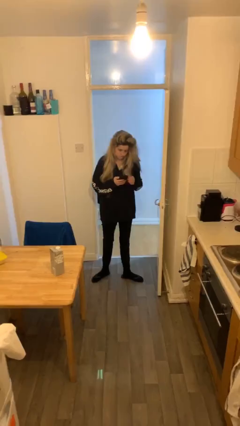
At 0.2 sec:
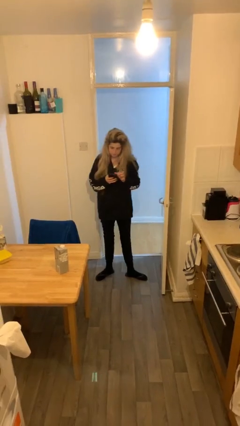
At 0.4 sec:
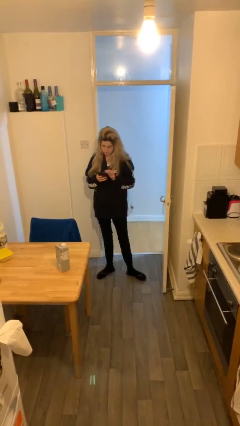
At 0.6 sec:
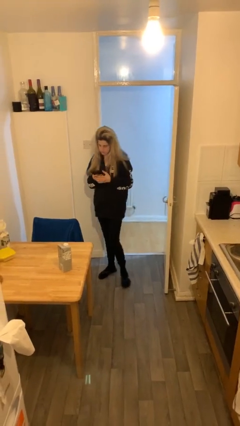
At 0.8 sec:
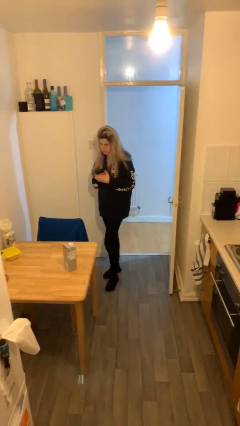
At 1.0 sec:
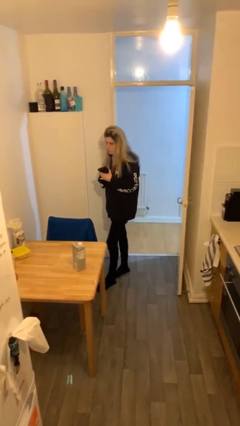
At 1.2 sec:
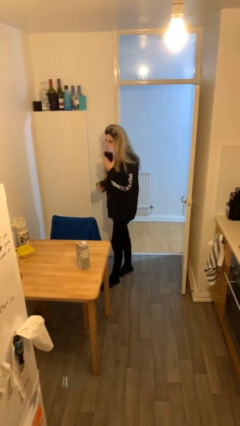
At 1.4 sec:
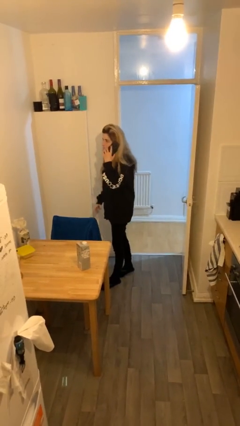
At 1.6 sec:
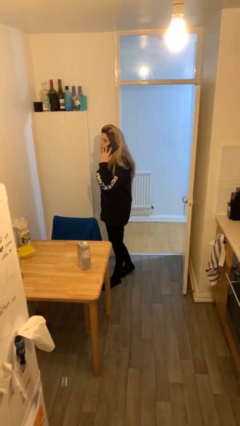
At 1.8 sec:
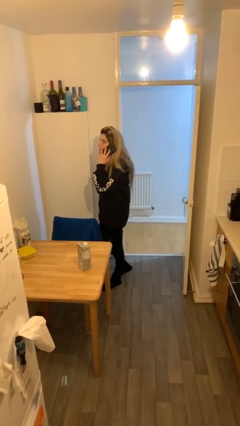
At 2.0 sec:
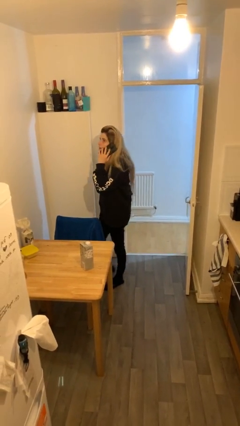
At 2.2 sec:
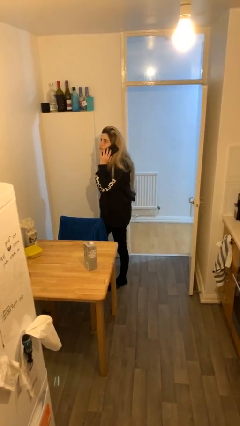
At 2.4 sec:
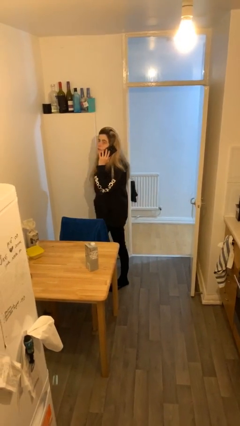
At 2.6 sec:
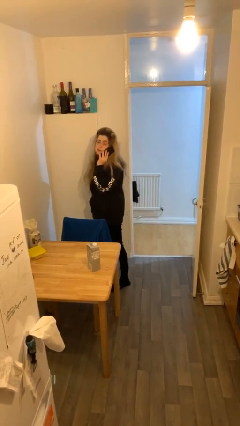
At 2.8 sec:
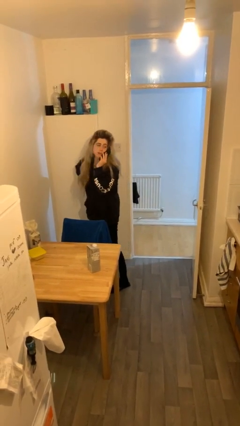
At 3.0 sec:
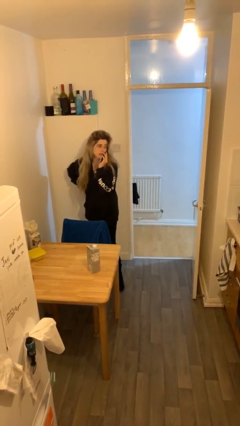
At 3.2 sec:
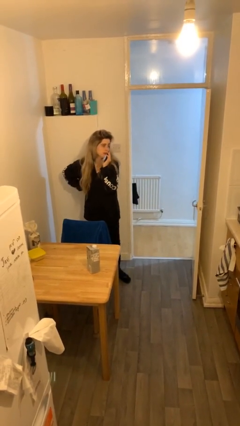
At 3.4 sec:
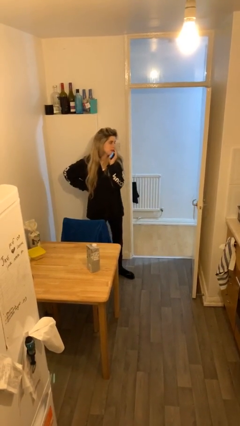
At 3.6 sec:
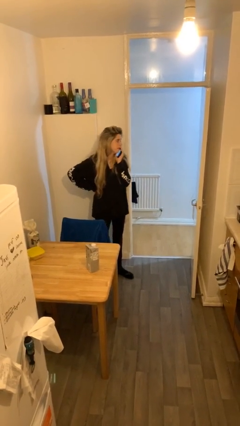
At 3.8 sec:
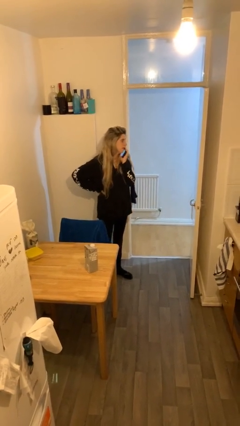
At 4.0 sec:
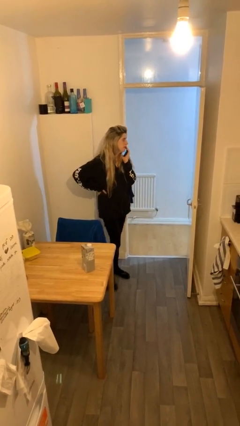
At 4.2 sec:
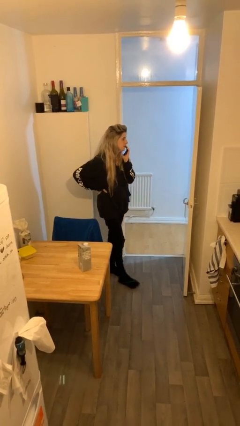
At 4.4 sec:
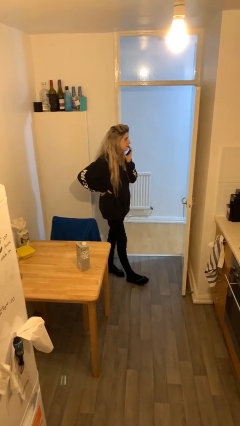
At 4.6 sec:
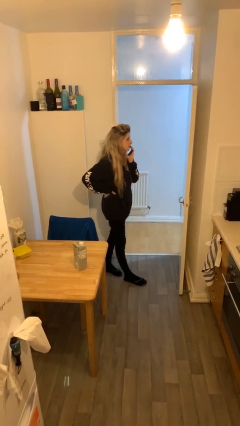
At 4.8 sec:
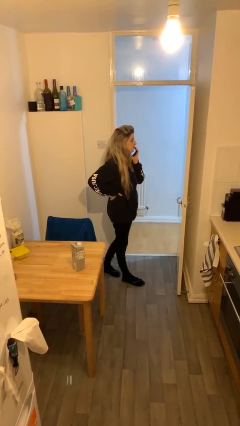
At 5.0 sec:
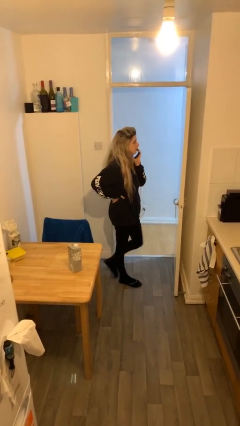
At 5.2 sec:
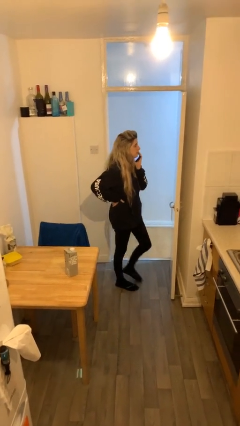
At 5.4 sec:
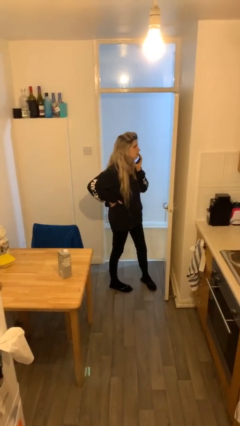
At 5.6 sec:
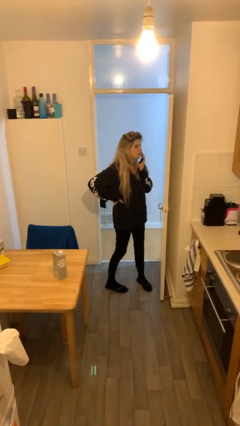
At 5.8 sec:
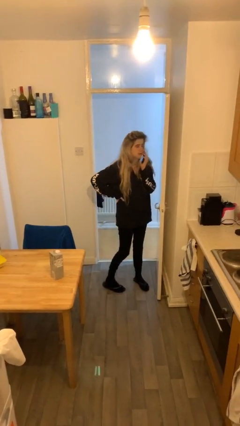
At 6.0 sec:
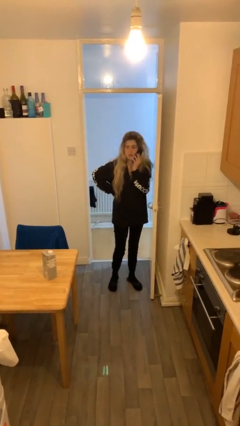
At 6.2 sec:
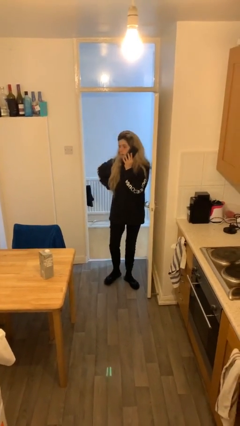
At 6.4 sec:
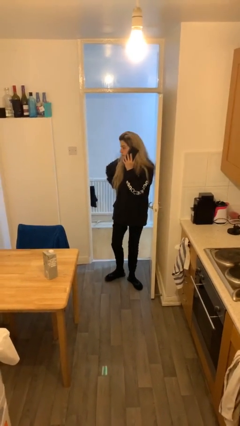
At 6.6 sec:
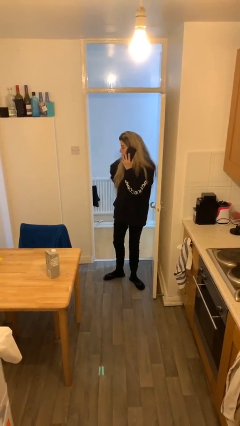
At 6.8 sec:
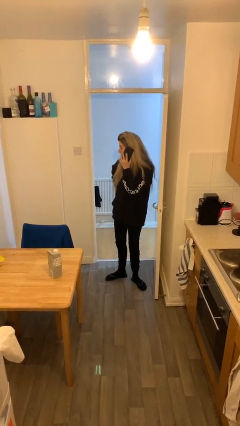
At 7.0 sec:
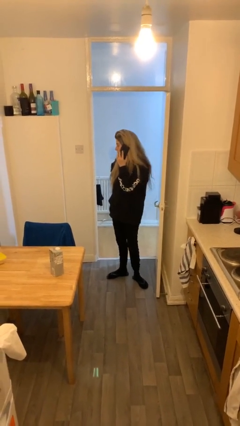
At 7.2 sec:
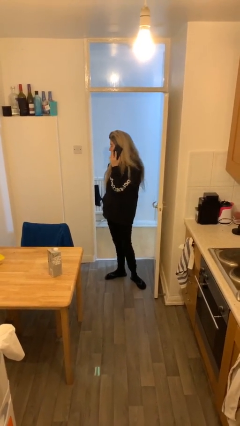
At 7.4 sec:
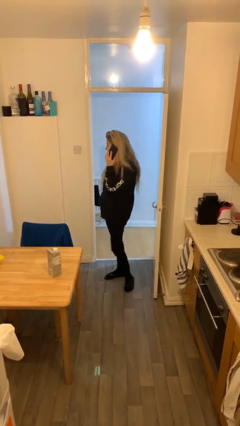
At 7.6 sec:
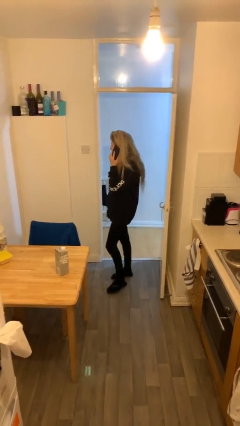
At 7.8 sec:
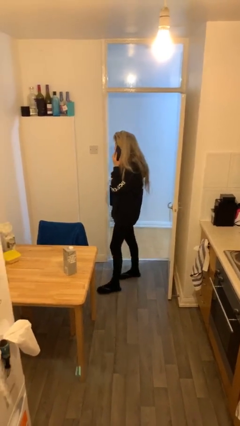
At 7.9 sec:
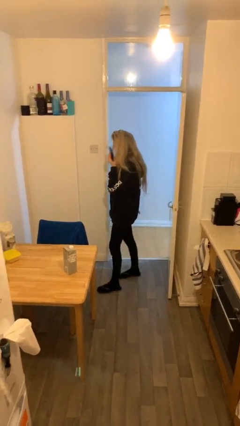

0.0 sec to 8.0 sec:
person talks on phone

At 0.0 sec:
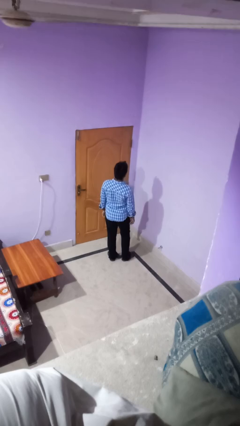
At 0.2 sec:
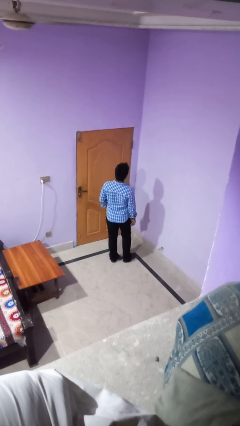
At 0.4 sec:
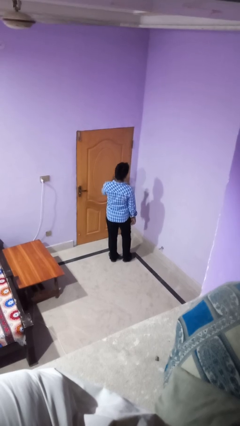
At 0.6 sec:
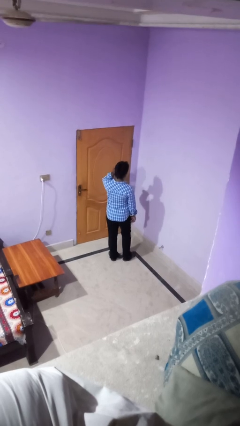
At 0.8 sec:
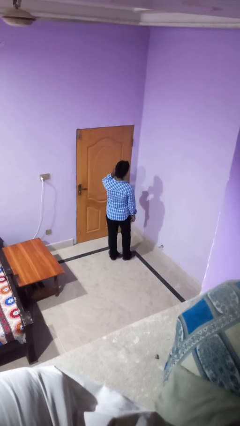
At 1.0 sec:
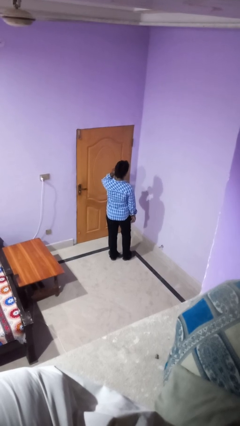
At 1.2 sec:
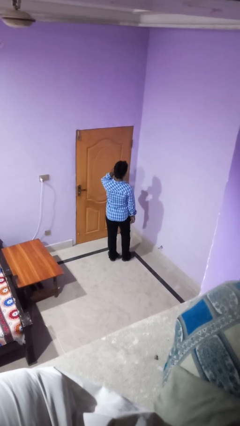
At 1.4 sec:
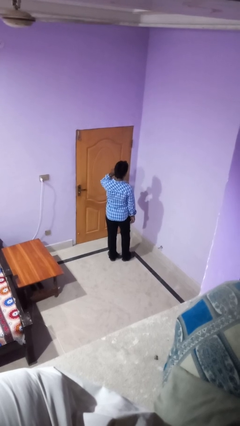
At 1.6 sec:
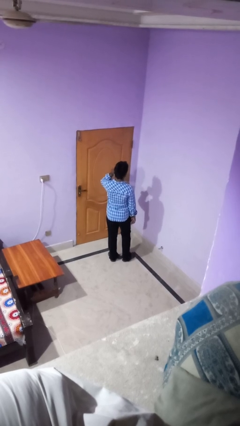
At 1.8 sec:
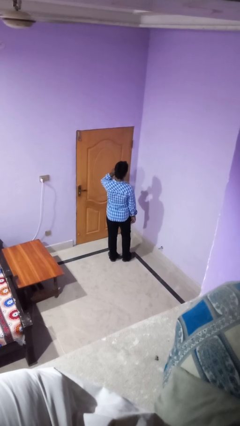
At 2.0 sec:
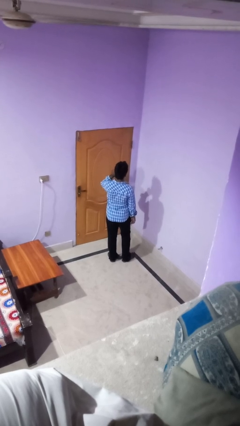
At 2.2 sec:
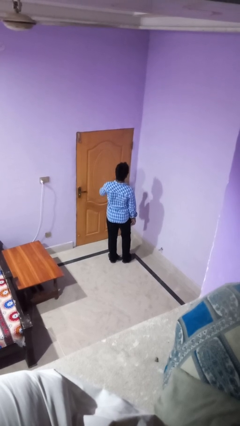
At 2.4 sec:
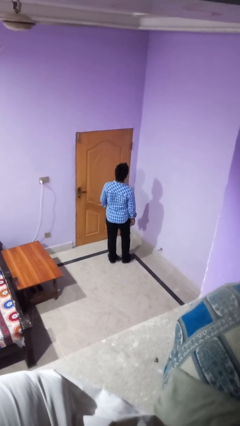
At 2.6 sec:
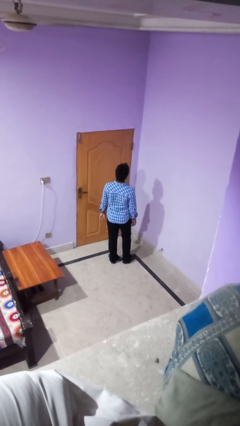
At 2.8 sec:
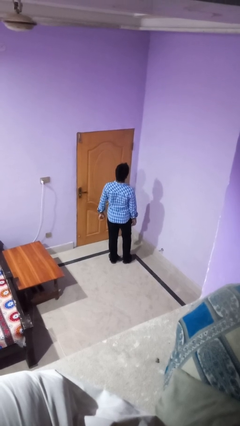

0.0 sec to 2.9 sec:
person touches earlobe

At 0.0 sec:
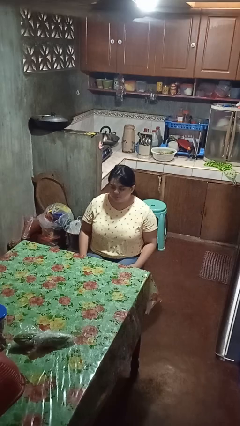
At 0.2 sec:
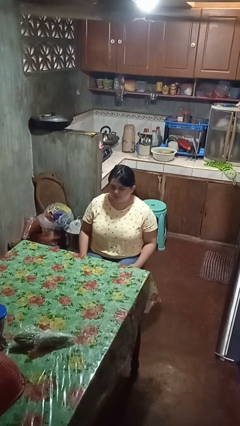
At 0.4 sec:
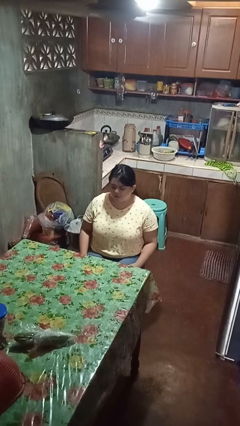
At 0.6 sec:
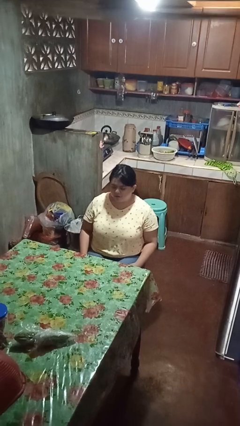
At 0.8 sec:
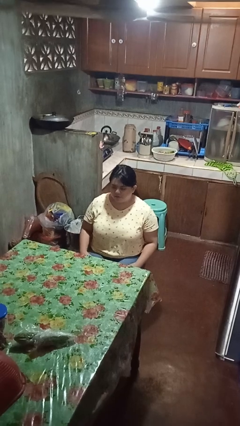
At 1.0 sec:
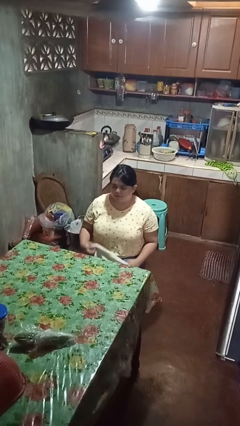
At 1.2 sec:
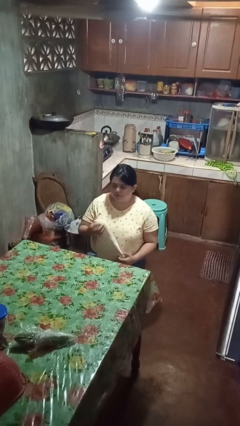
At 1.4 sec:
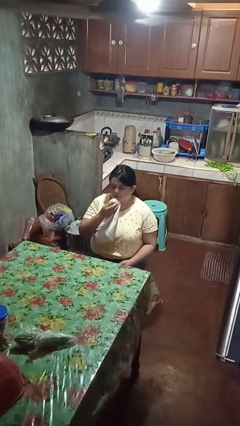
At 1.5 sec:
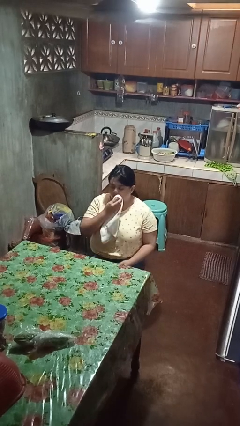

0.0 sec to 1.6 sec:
person wipes mouth with napkin

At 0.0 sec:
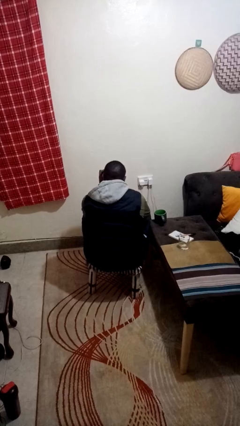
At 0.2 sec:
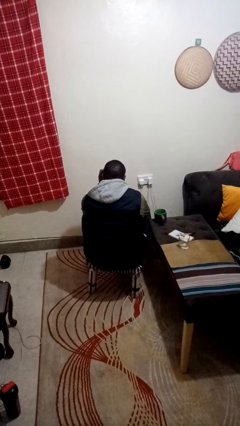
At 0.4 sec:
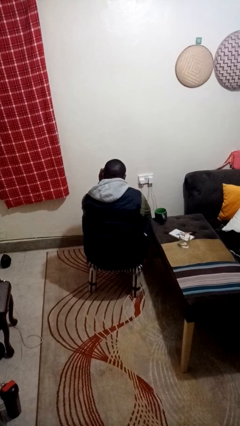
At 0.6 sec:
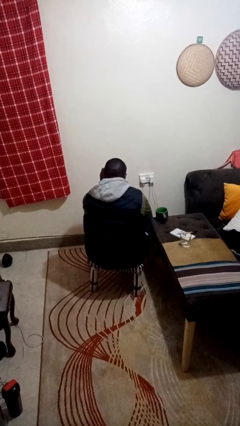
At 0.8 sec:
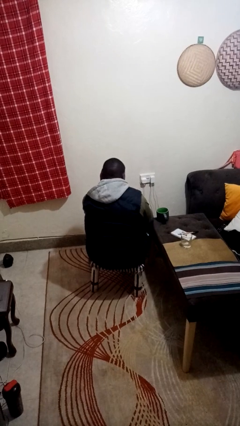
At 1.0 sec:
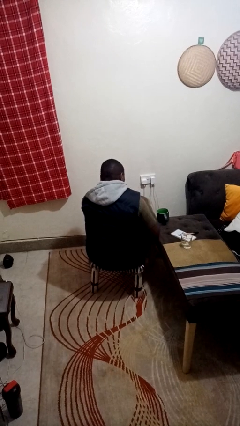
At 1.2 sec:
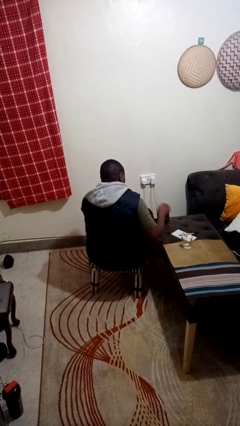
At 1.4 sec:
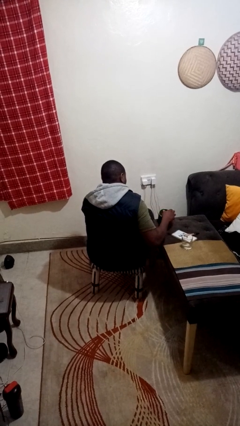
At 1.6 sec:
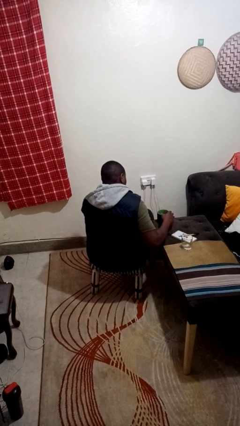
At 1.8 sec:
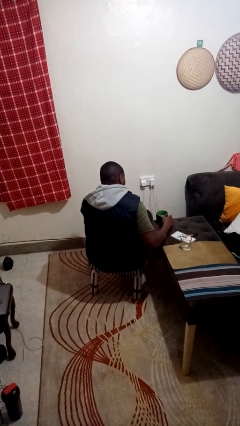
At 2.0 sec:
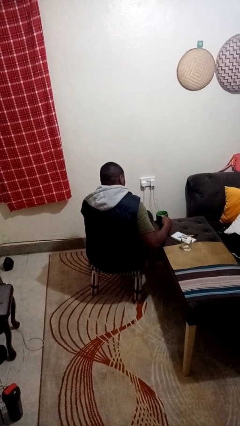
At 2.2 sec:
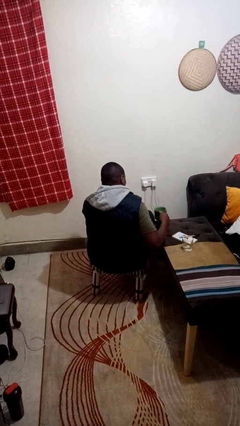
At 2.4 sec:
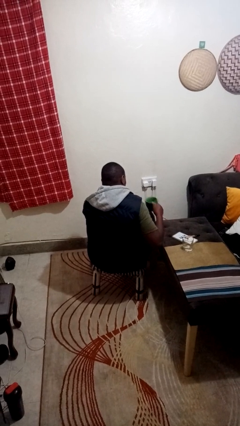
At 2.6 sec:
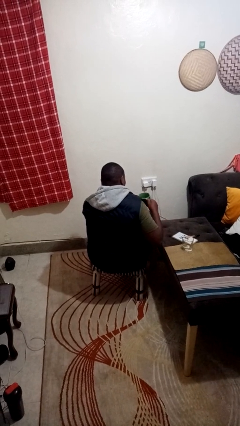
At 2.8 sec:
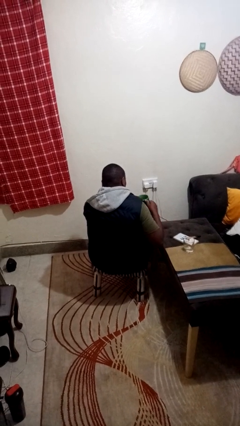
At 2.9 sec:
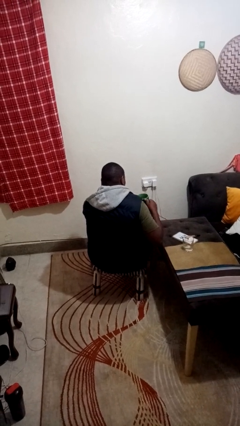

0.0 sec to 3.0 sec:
person picks up object from table

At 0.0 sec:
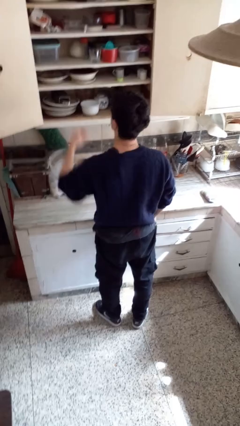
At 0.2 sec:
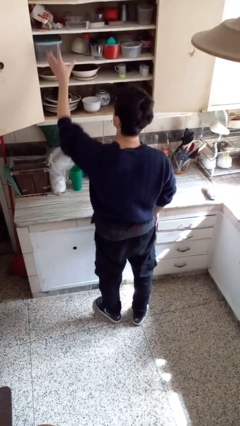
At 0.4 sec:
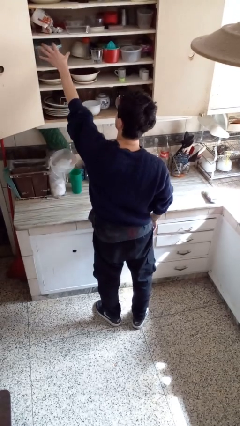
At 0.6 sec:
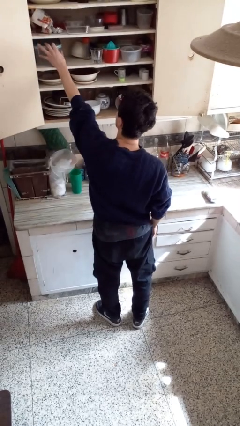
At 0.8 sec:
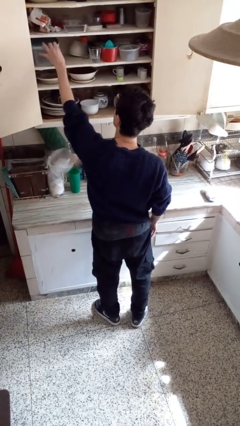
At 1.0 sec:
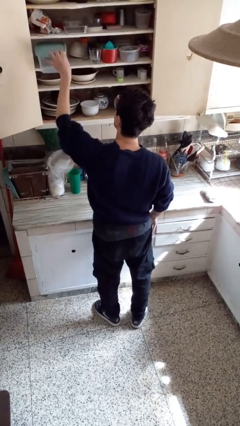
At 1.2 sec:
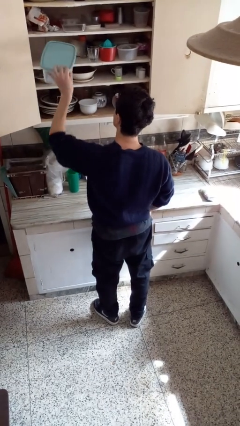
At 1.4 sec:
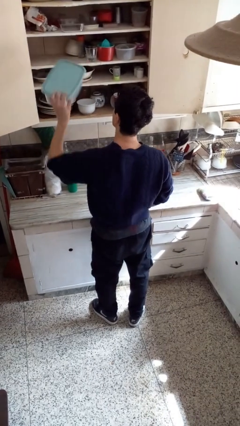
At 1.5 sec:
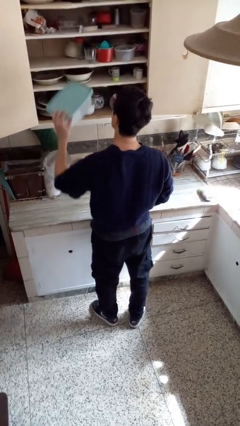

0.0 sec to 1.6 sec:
person picks up object from cabinet
